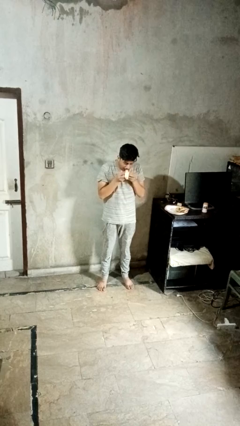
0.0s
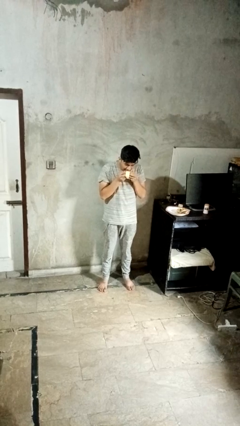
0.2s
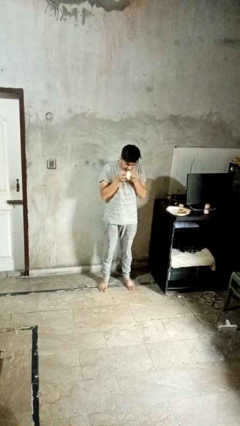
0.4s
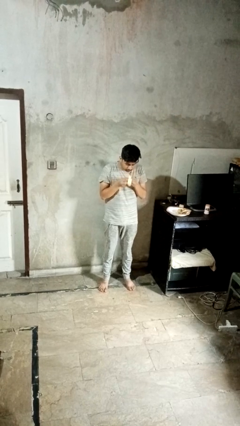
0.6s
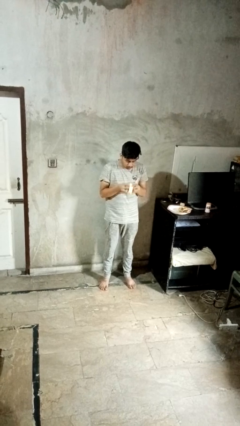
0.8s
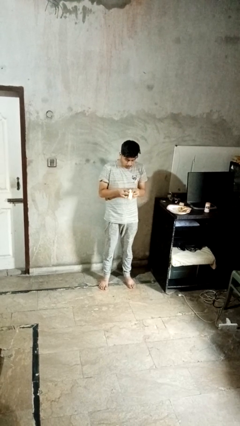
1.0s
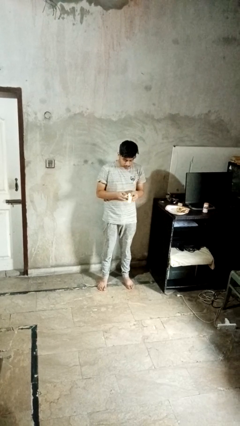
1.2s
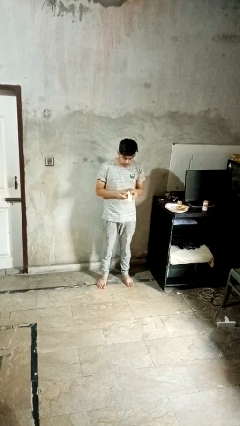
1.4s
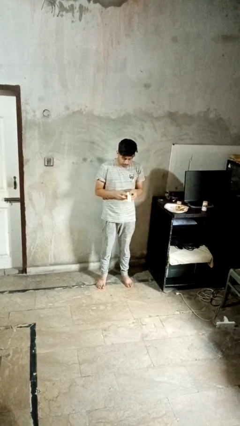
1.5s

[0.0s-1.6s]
person eats banana

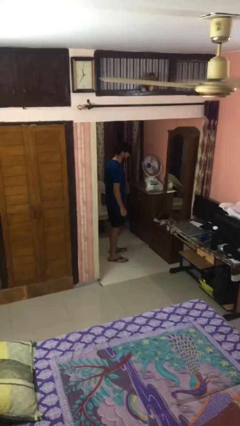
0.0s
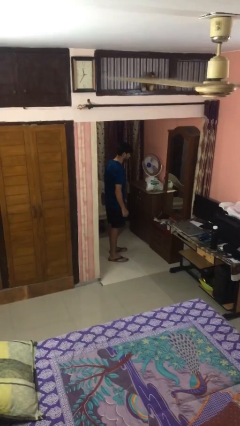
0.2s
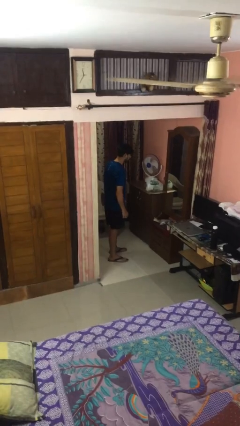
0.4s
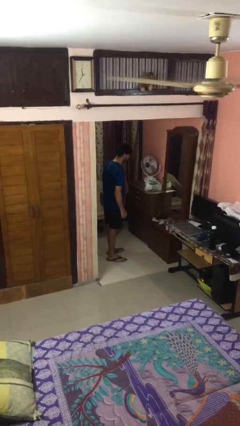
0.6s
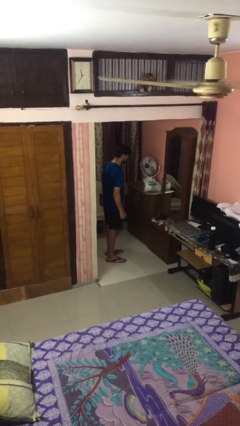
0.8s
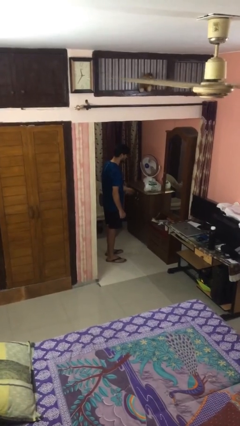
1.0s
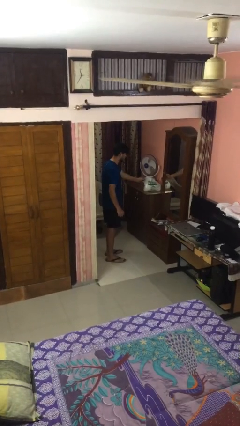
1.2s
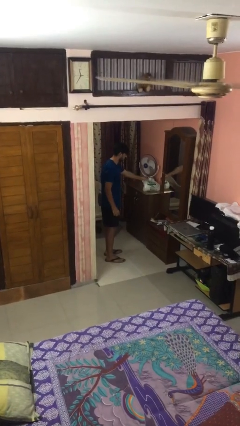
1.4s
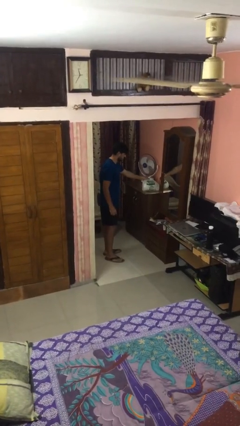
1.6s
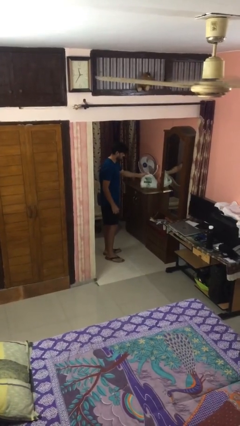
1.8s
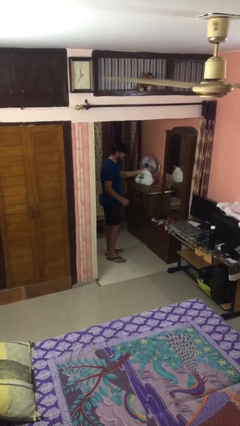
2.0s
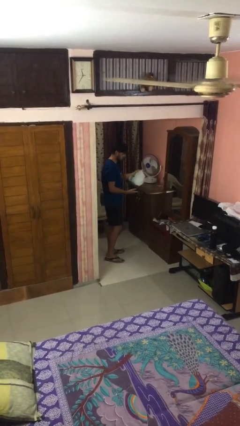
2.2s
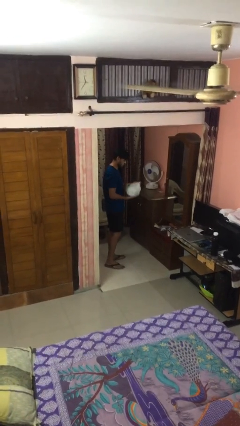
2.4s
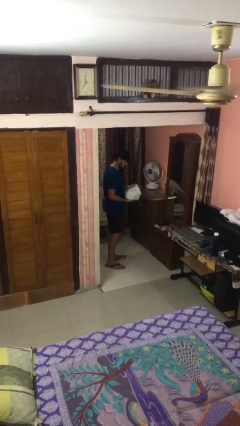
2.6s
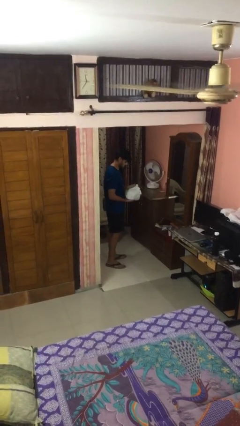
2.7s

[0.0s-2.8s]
person picks up object from countertop

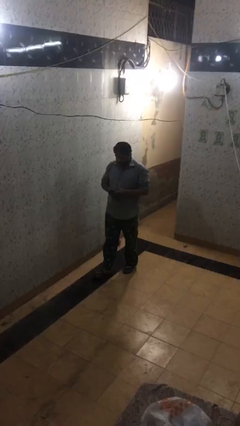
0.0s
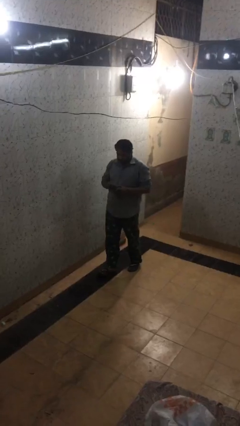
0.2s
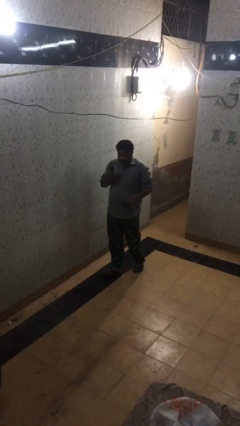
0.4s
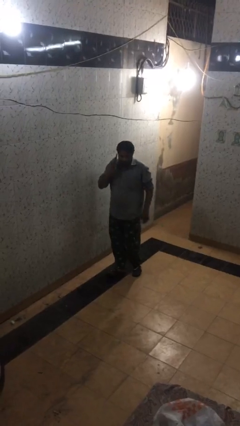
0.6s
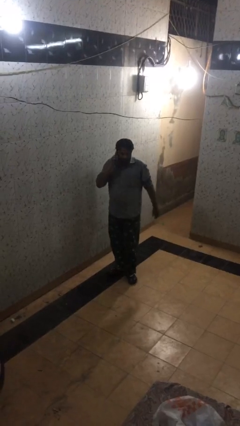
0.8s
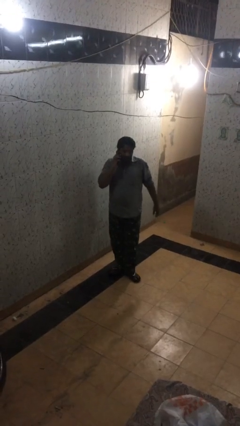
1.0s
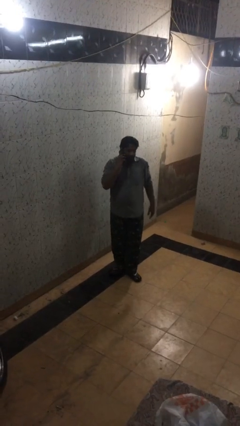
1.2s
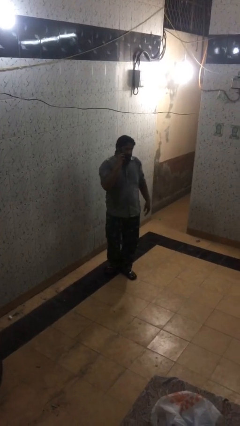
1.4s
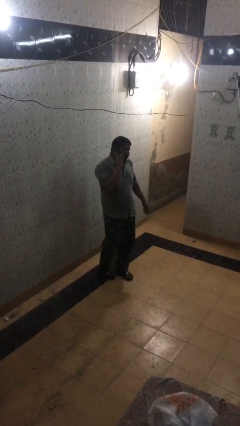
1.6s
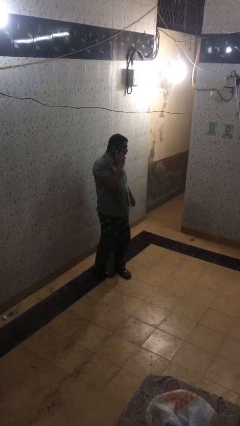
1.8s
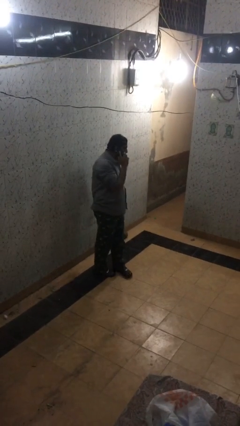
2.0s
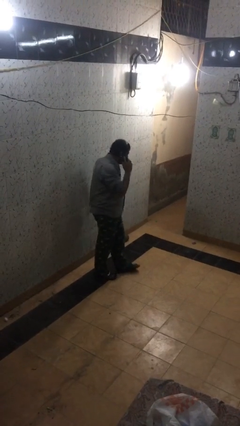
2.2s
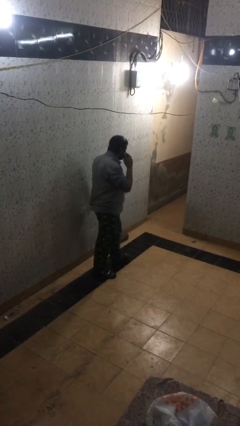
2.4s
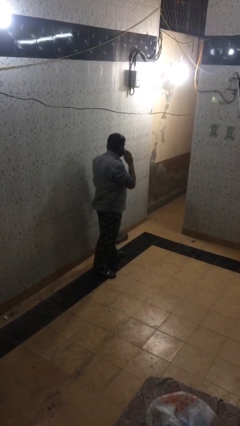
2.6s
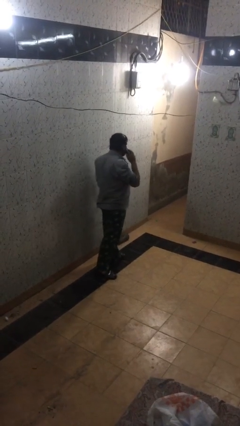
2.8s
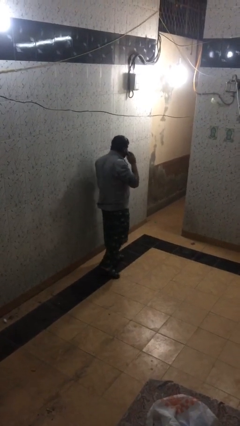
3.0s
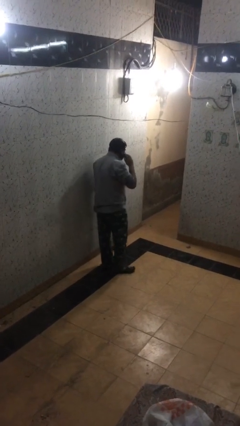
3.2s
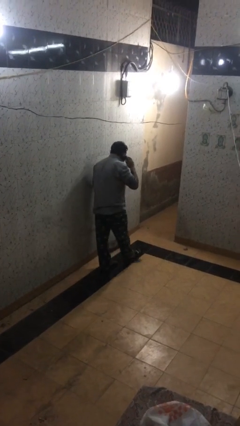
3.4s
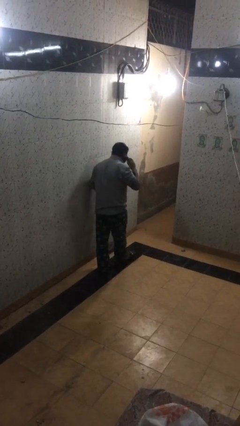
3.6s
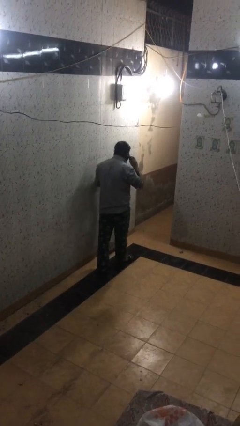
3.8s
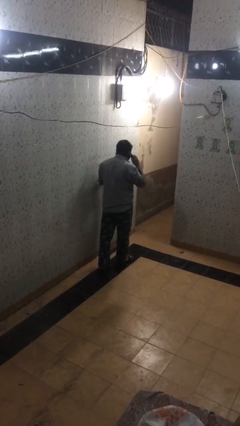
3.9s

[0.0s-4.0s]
person talks on phone

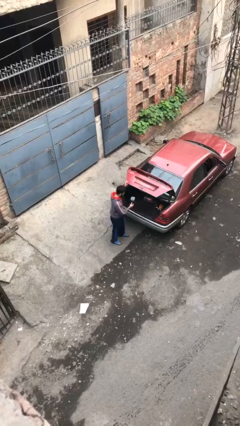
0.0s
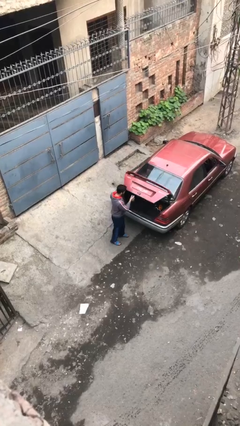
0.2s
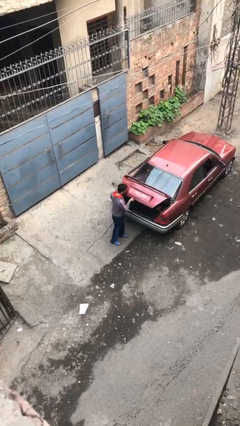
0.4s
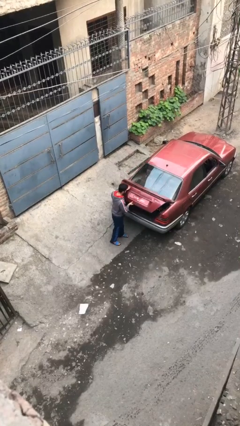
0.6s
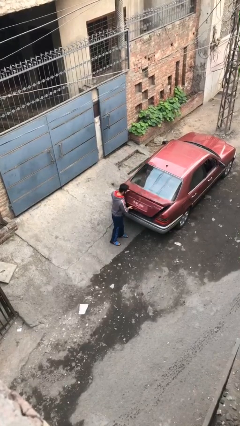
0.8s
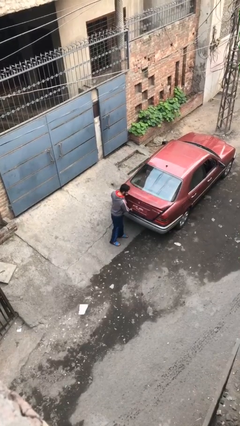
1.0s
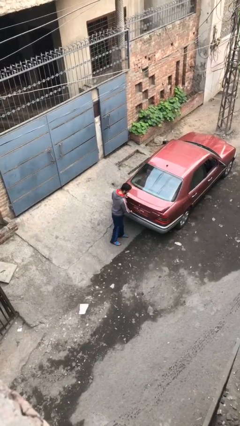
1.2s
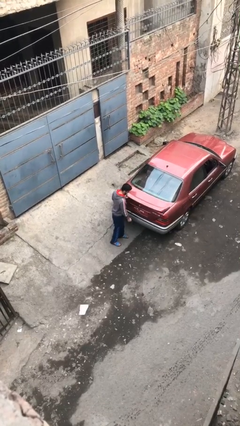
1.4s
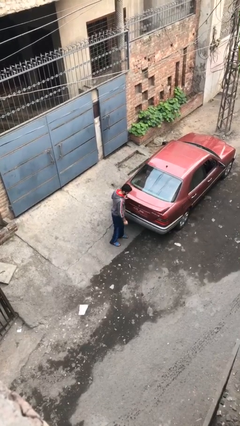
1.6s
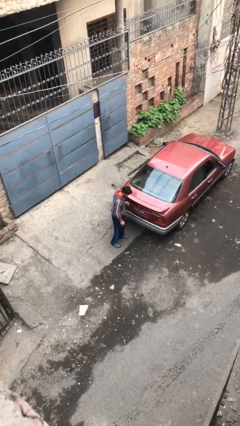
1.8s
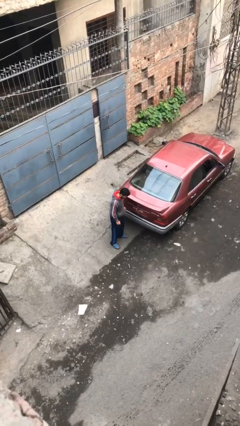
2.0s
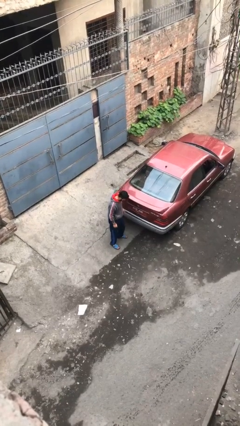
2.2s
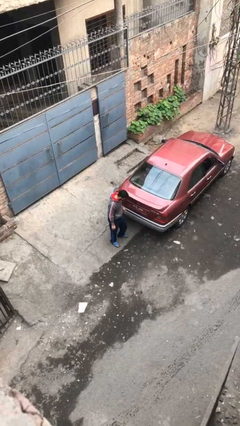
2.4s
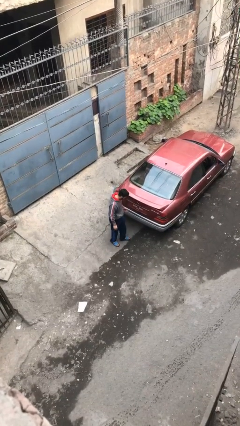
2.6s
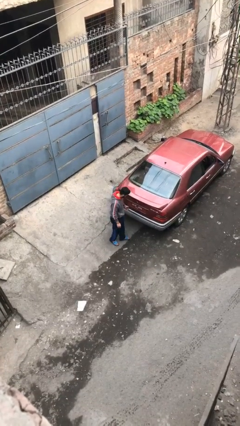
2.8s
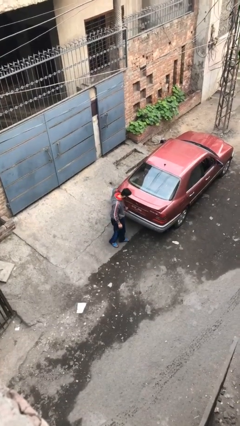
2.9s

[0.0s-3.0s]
person closes car trunk

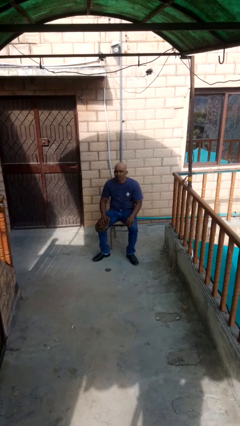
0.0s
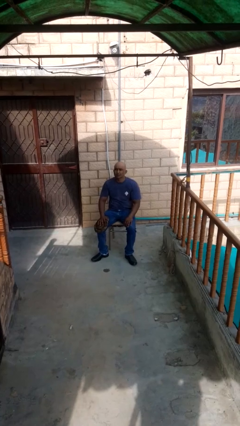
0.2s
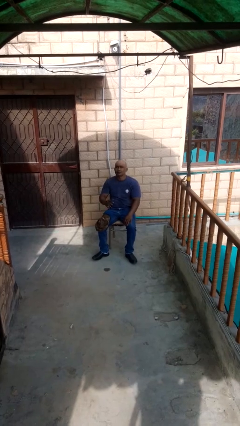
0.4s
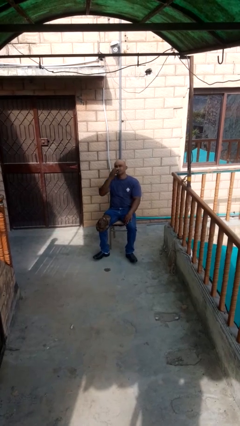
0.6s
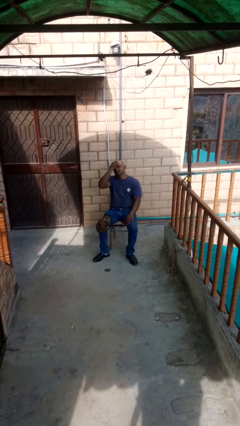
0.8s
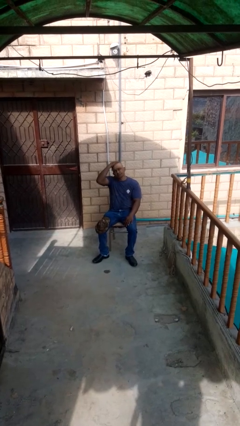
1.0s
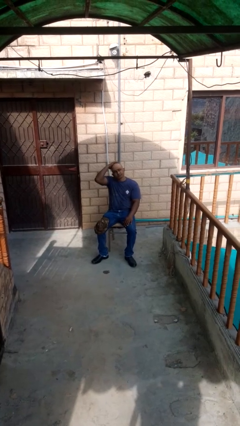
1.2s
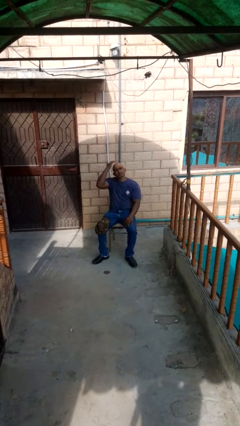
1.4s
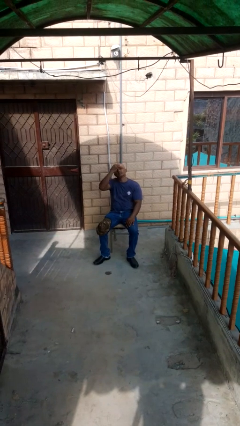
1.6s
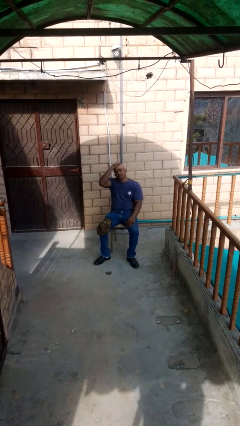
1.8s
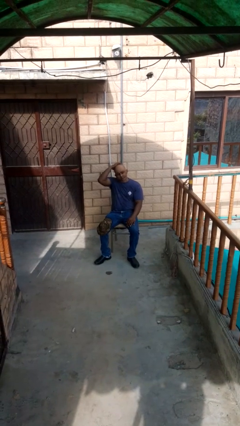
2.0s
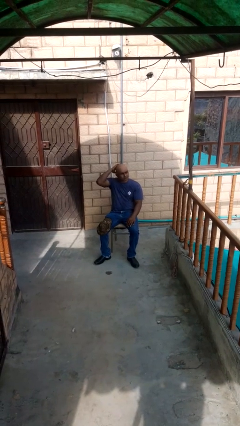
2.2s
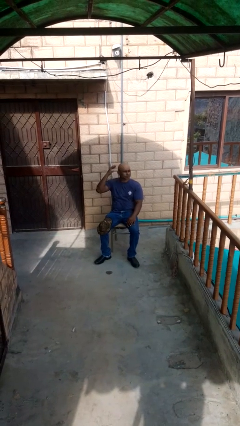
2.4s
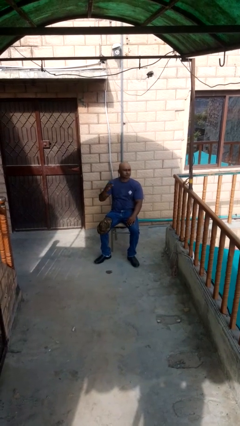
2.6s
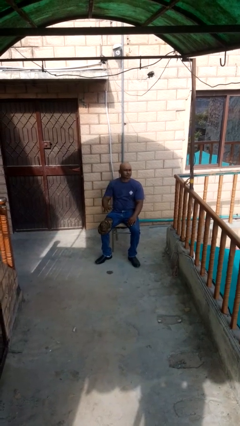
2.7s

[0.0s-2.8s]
person strokes hair

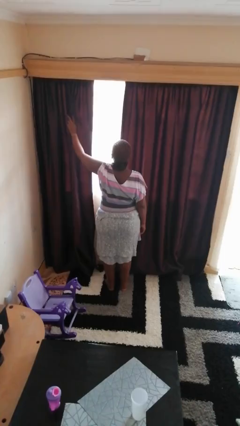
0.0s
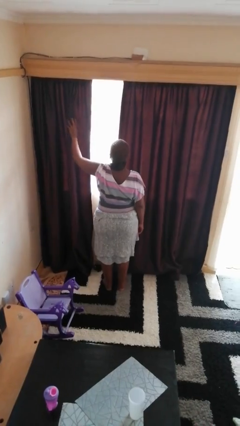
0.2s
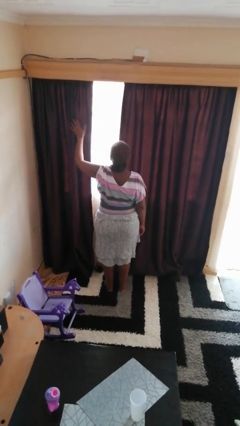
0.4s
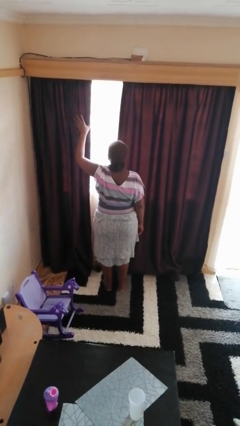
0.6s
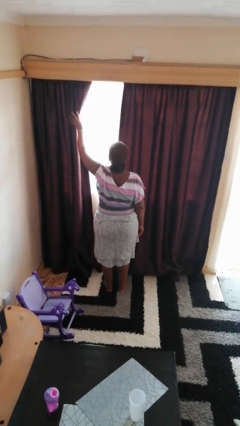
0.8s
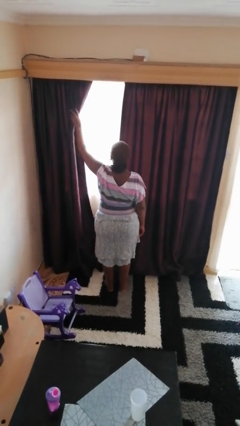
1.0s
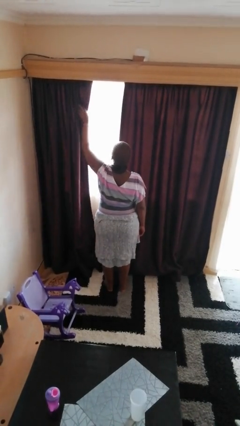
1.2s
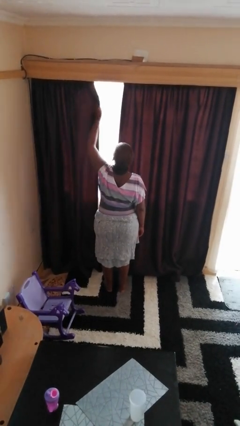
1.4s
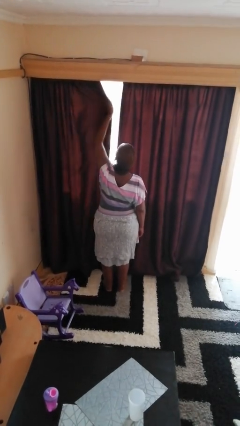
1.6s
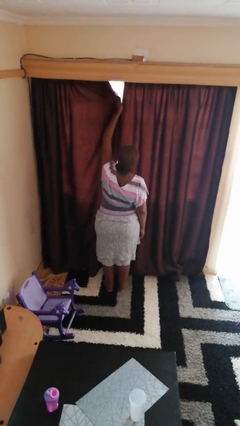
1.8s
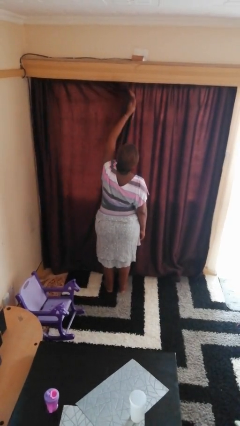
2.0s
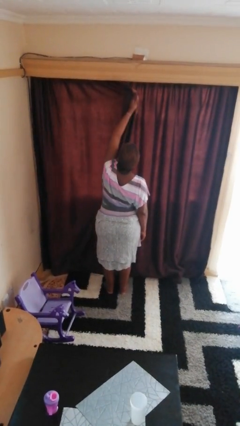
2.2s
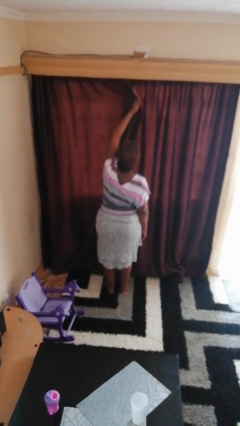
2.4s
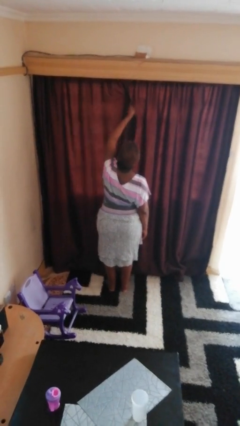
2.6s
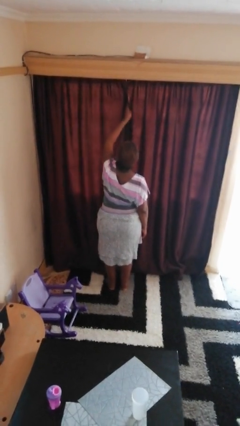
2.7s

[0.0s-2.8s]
person closes curtains
